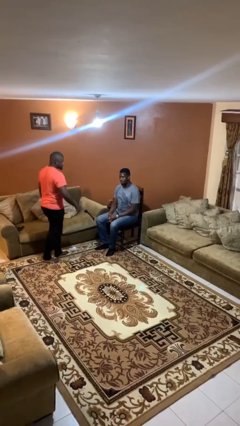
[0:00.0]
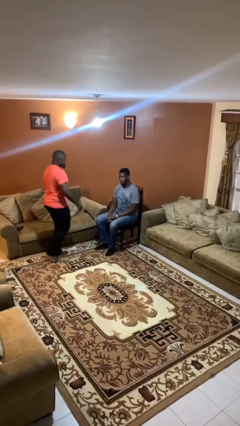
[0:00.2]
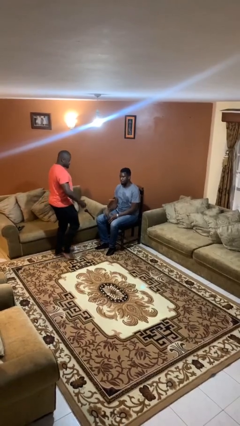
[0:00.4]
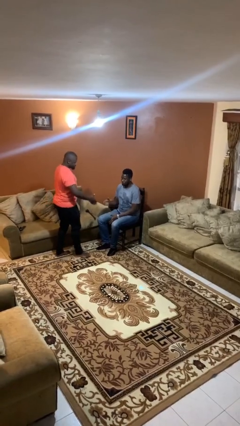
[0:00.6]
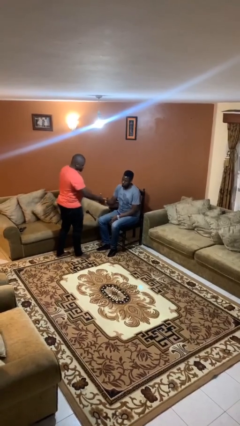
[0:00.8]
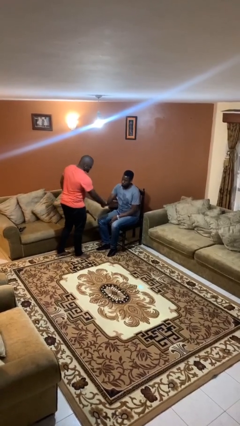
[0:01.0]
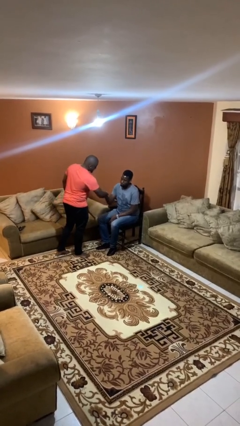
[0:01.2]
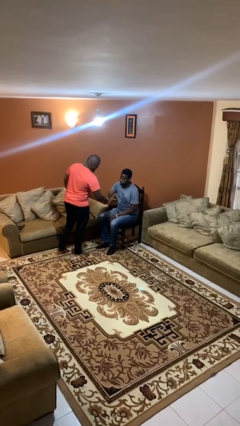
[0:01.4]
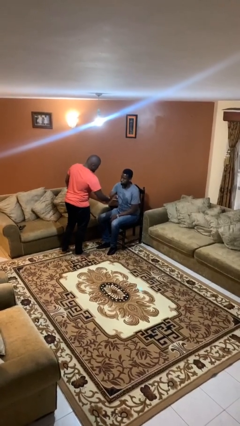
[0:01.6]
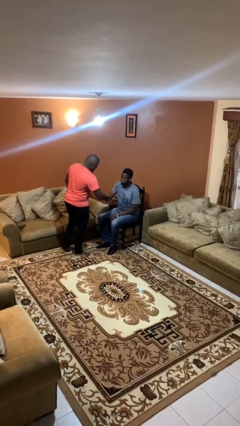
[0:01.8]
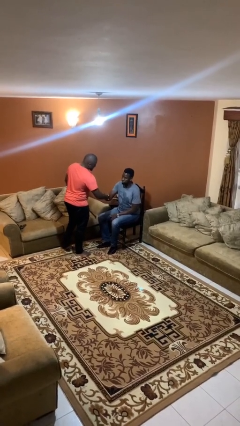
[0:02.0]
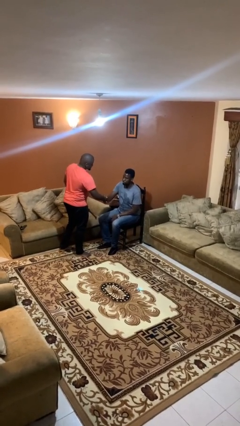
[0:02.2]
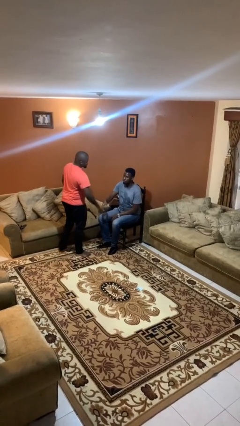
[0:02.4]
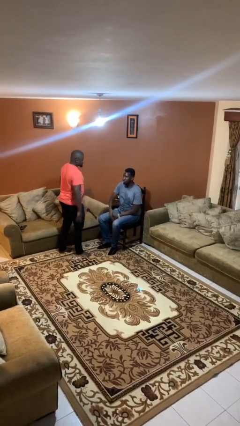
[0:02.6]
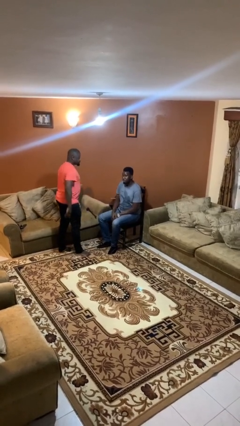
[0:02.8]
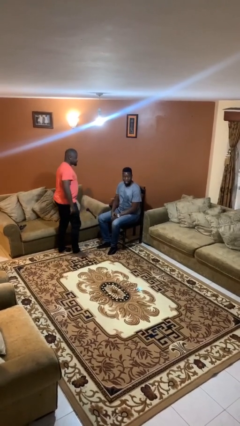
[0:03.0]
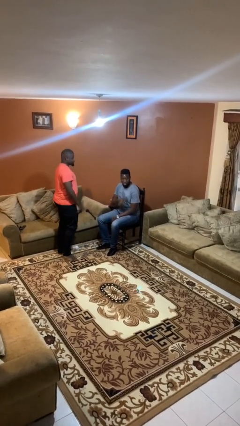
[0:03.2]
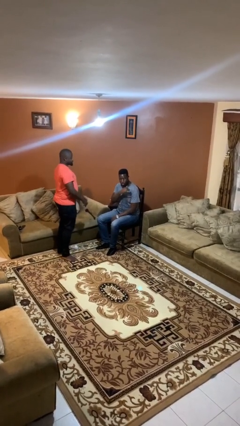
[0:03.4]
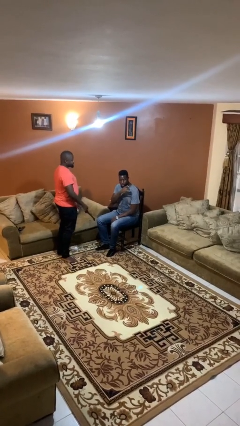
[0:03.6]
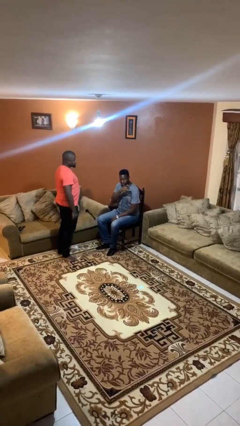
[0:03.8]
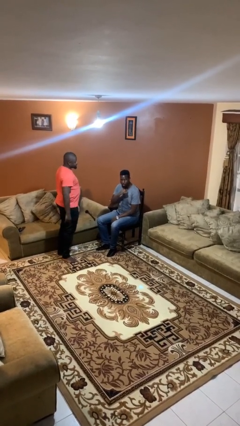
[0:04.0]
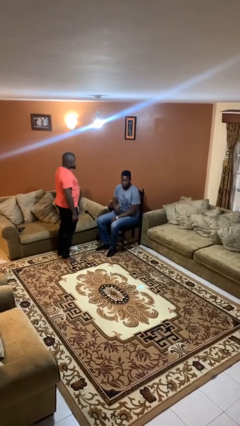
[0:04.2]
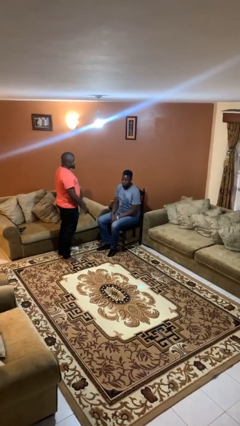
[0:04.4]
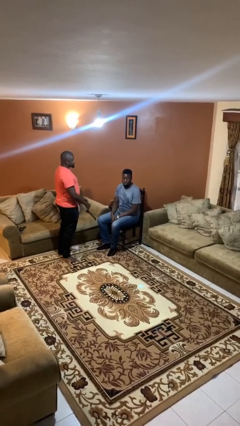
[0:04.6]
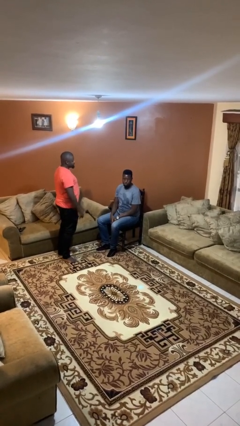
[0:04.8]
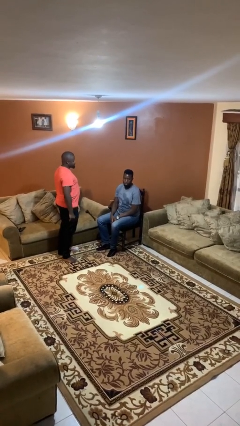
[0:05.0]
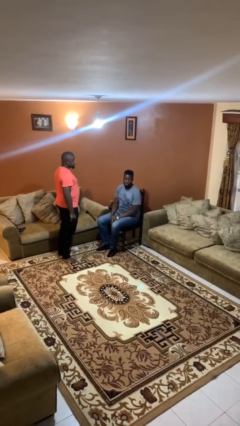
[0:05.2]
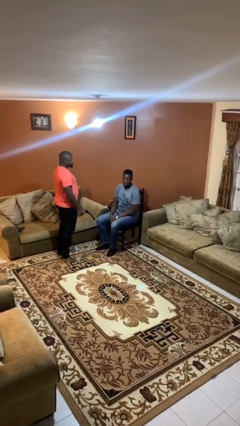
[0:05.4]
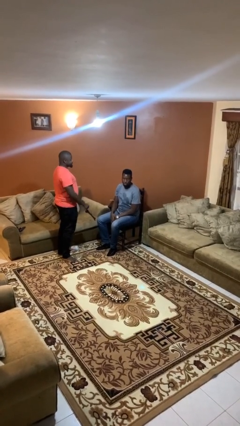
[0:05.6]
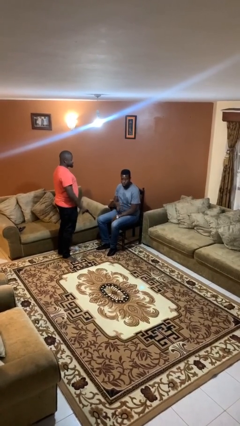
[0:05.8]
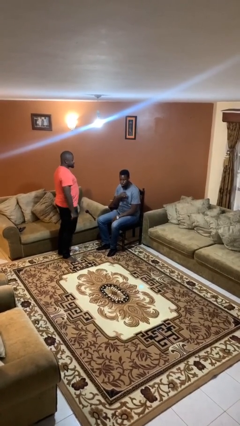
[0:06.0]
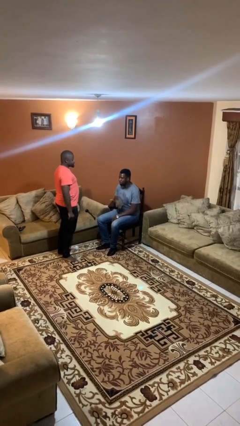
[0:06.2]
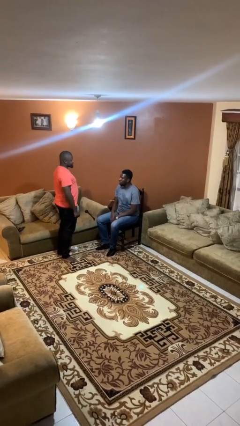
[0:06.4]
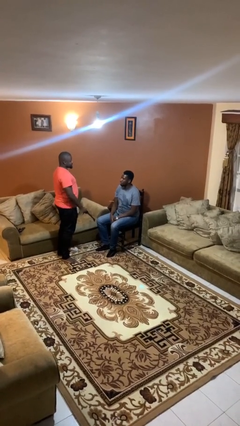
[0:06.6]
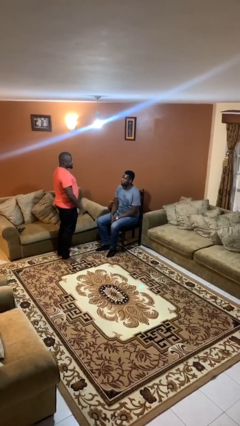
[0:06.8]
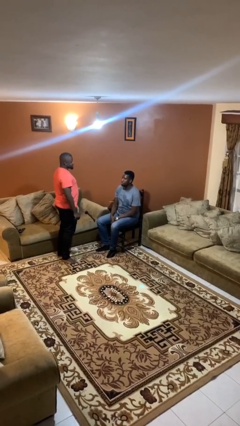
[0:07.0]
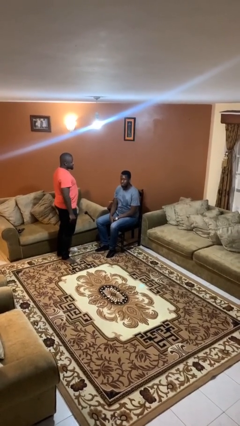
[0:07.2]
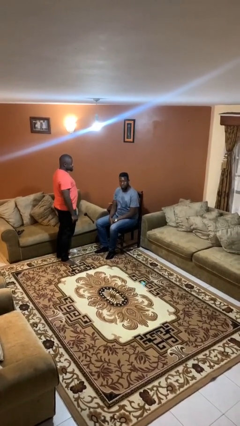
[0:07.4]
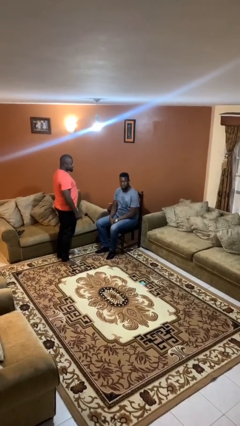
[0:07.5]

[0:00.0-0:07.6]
person shakes hand

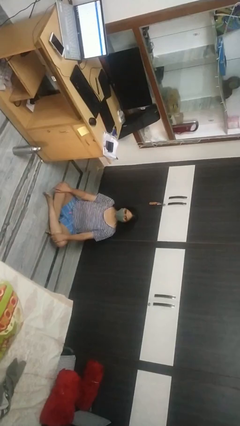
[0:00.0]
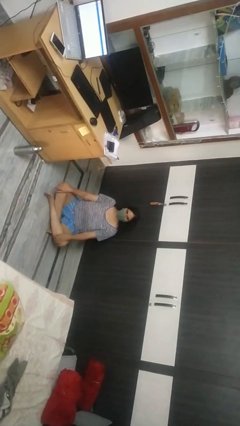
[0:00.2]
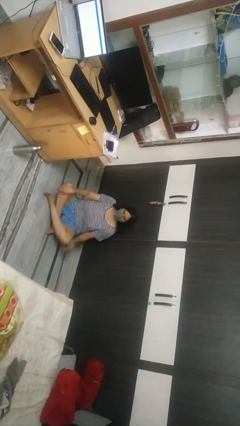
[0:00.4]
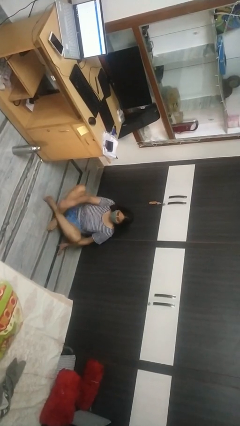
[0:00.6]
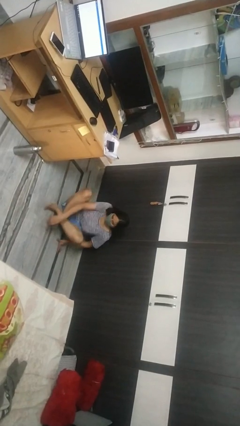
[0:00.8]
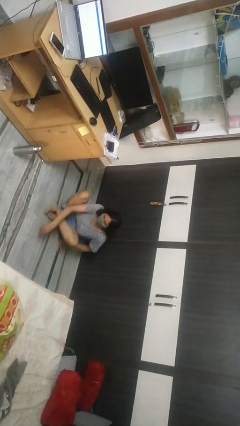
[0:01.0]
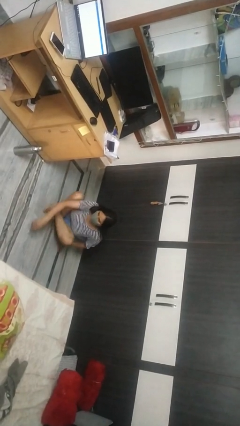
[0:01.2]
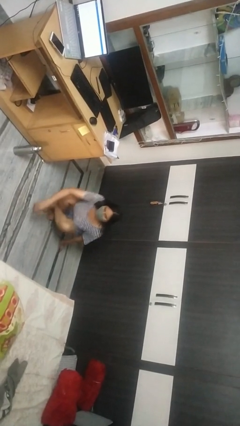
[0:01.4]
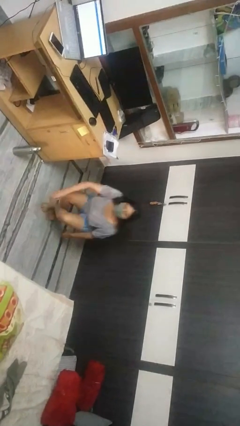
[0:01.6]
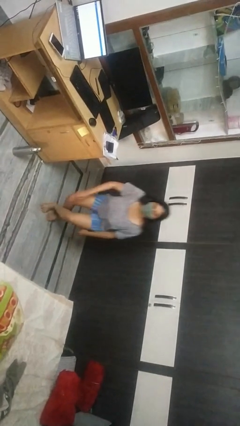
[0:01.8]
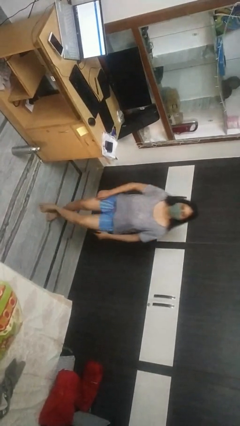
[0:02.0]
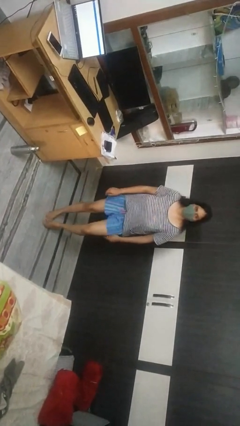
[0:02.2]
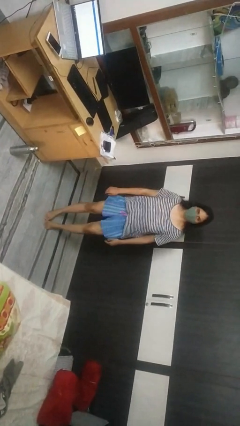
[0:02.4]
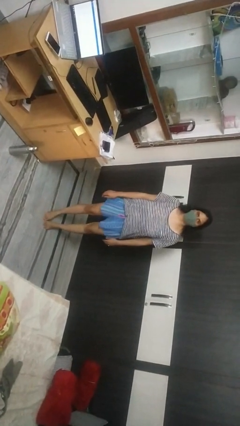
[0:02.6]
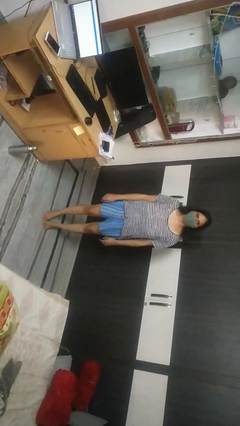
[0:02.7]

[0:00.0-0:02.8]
person stands up from floor

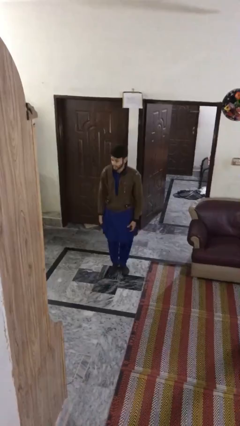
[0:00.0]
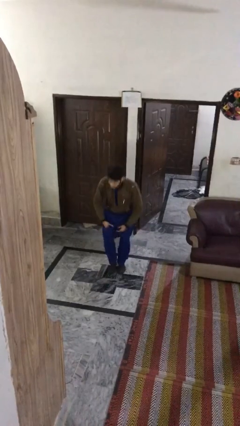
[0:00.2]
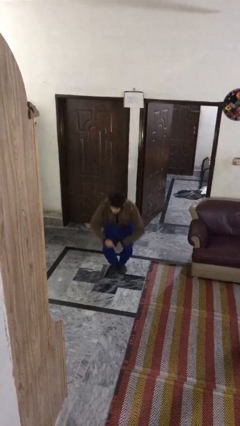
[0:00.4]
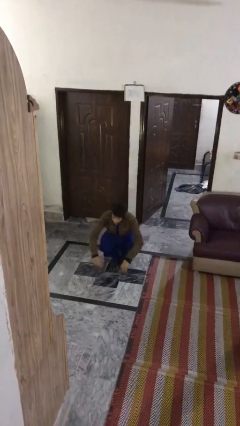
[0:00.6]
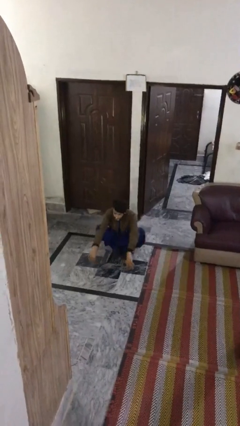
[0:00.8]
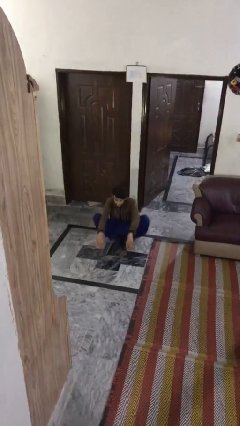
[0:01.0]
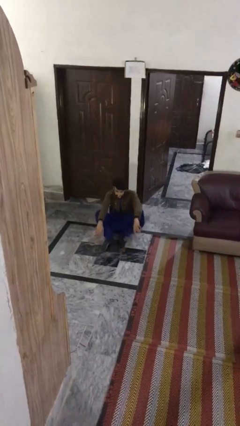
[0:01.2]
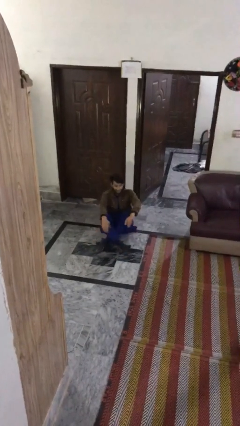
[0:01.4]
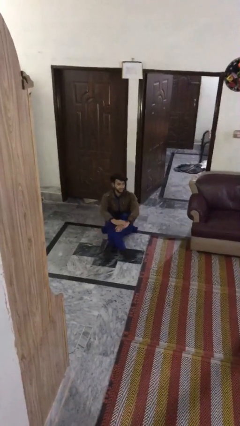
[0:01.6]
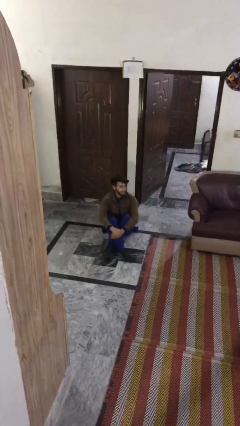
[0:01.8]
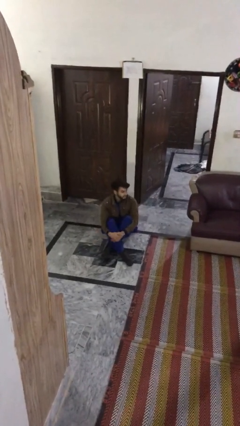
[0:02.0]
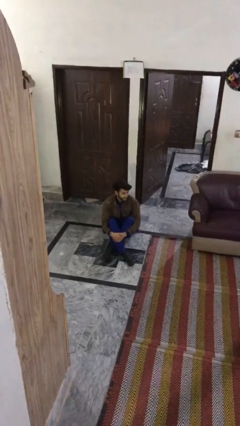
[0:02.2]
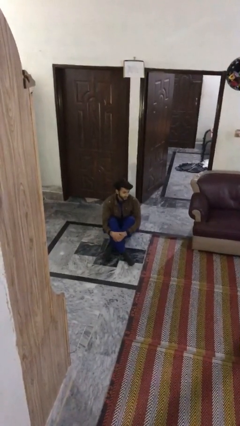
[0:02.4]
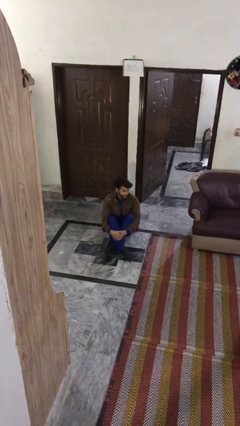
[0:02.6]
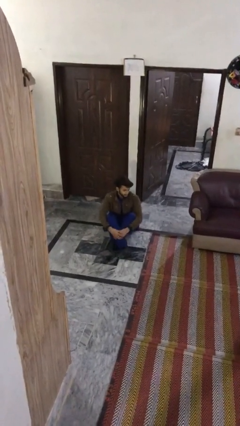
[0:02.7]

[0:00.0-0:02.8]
person sits down

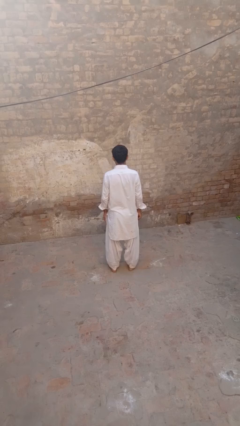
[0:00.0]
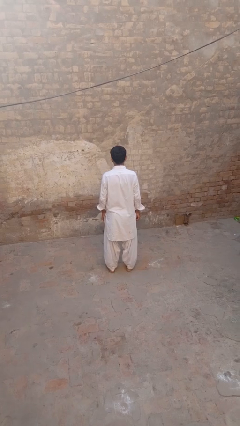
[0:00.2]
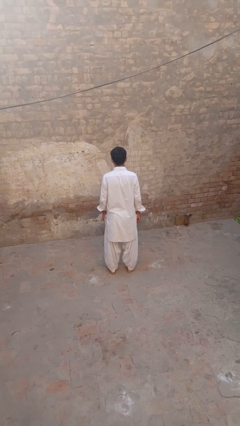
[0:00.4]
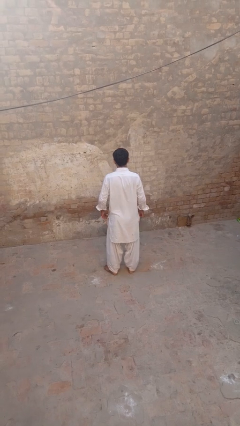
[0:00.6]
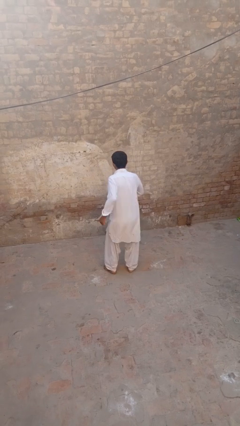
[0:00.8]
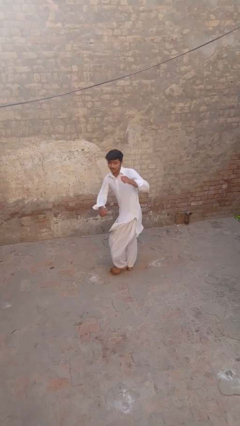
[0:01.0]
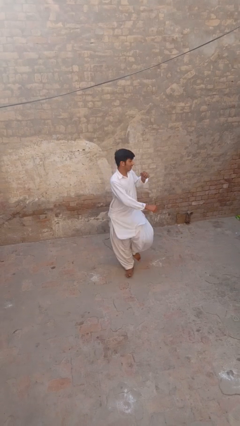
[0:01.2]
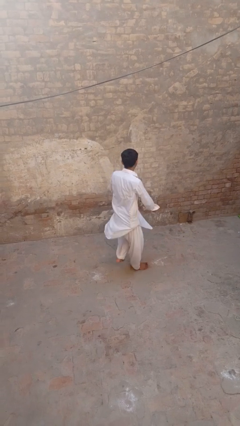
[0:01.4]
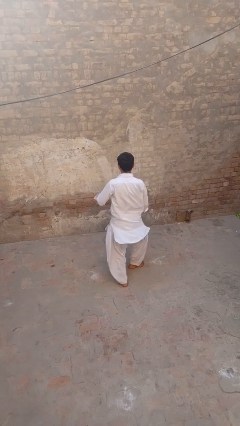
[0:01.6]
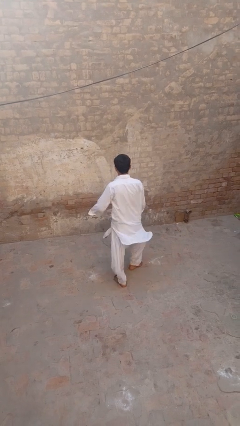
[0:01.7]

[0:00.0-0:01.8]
person twirls

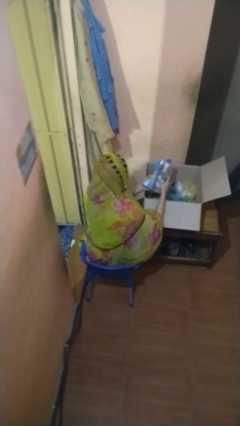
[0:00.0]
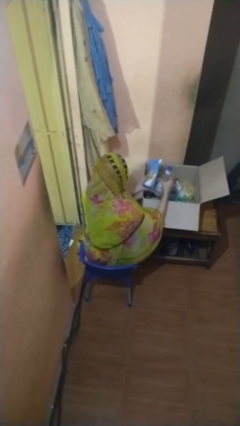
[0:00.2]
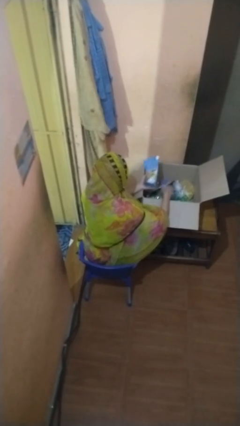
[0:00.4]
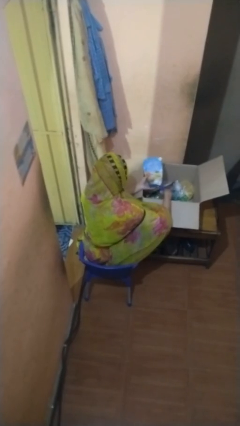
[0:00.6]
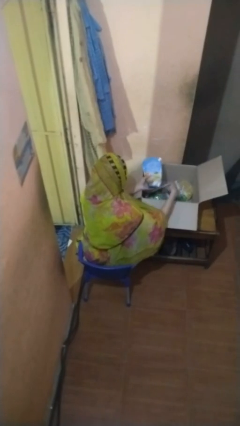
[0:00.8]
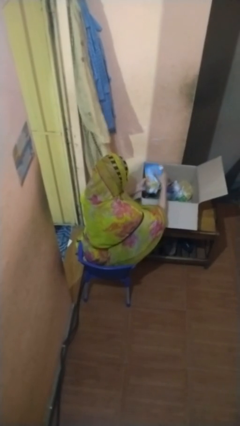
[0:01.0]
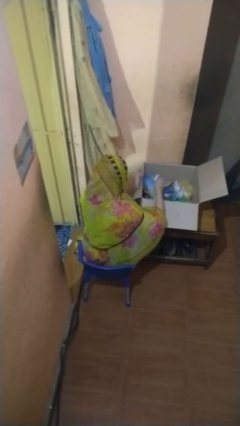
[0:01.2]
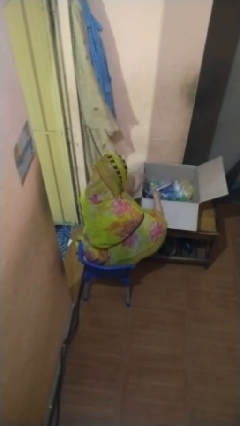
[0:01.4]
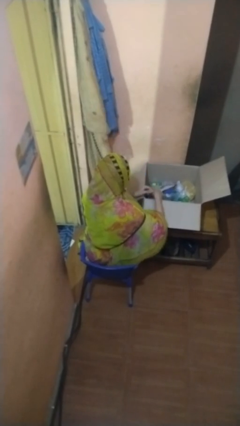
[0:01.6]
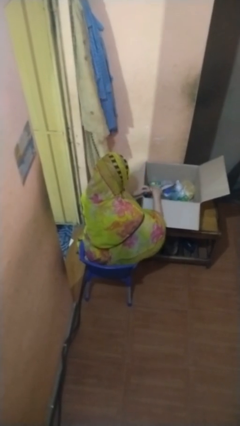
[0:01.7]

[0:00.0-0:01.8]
person puts object into box

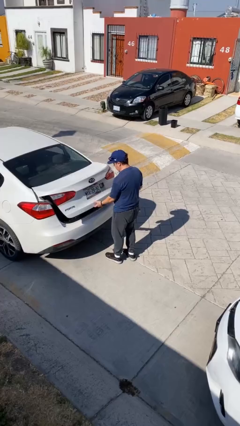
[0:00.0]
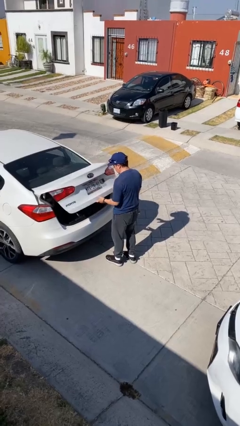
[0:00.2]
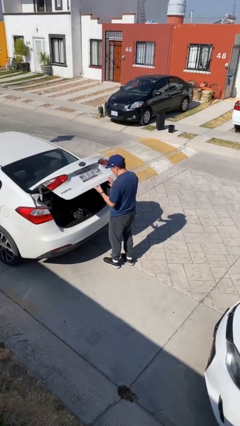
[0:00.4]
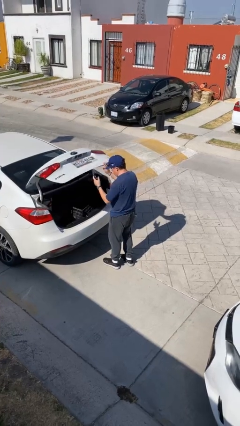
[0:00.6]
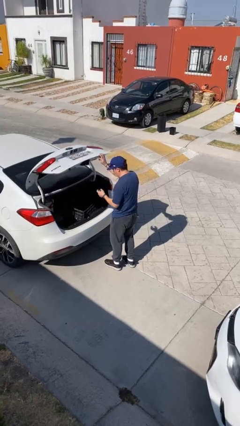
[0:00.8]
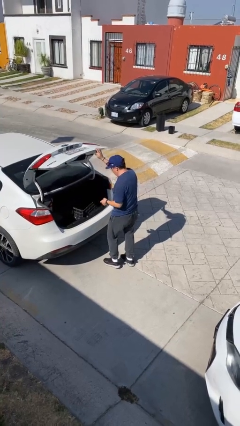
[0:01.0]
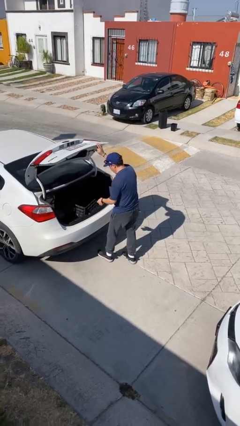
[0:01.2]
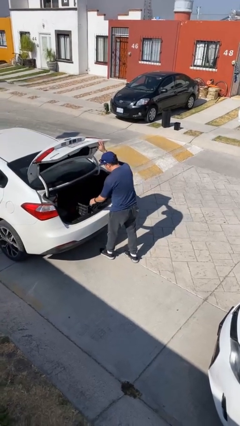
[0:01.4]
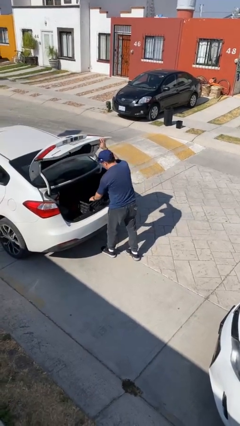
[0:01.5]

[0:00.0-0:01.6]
person opens car trunk
